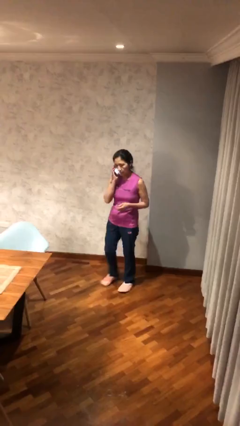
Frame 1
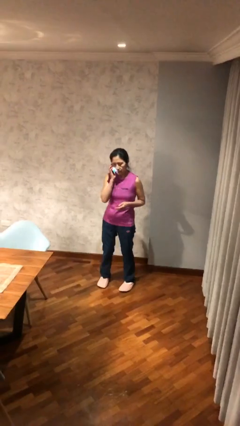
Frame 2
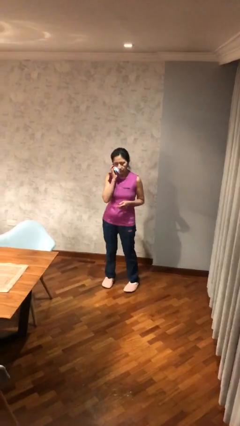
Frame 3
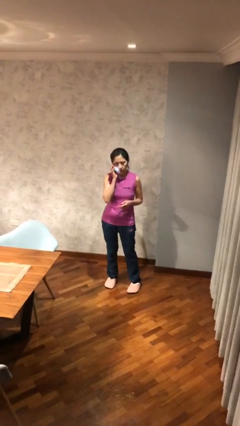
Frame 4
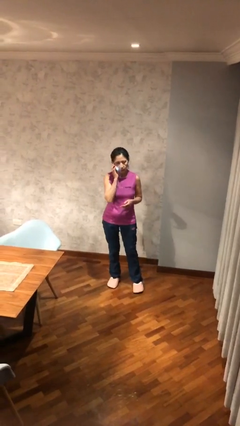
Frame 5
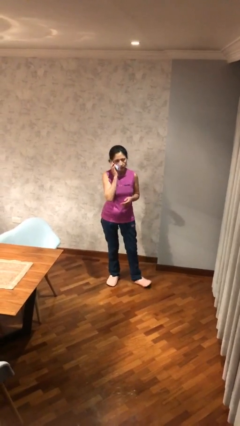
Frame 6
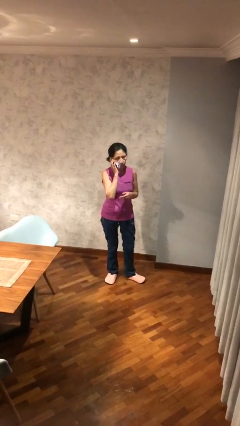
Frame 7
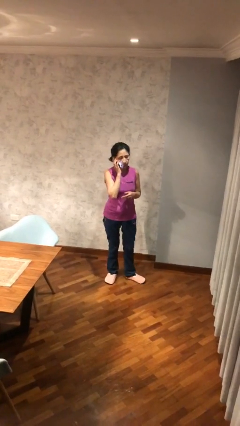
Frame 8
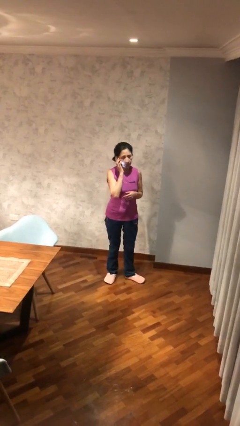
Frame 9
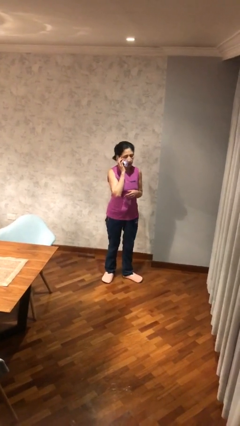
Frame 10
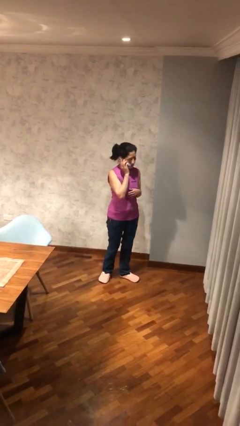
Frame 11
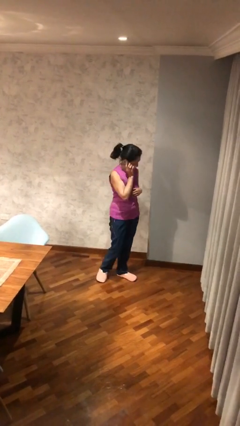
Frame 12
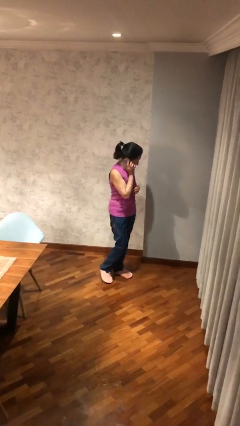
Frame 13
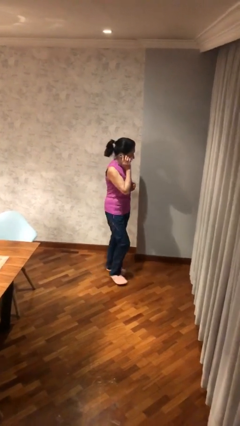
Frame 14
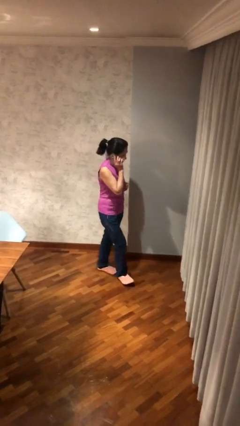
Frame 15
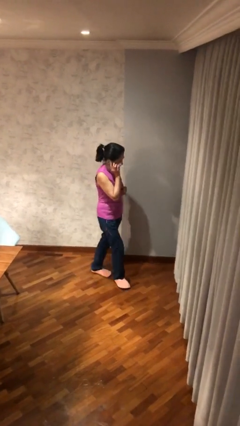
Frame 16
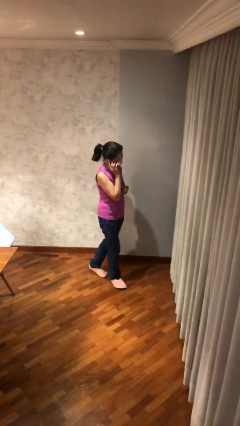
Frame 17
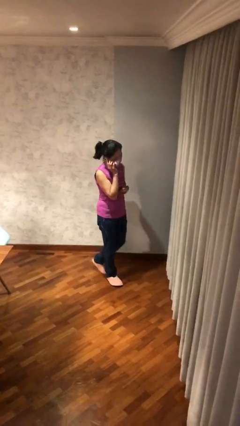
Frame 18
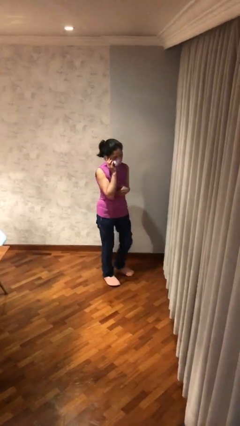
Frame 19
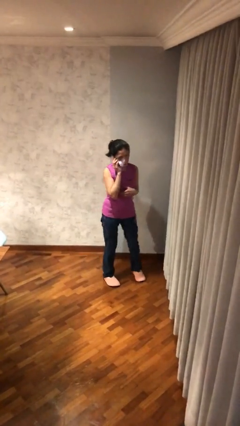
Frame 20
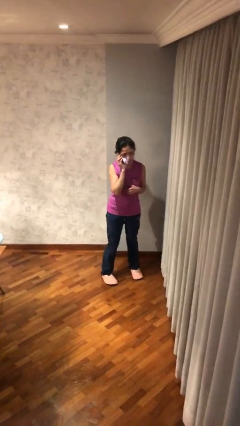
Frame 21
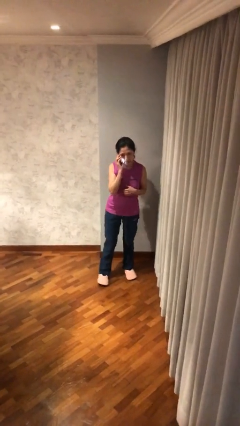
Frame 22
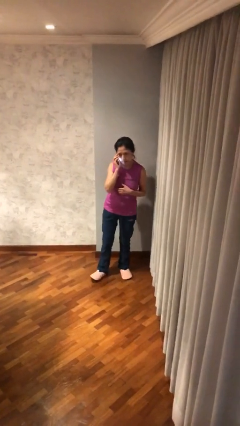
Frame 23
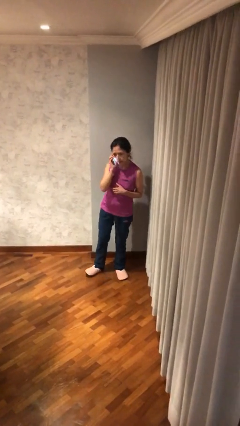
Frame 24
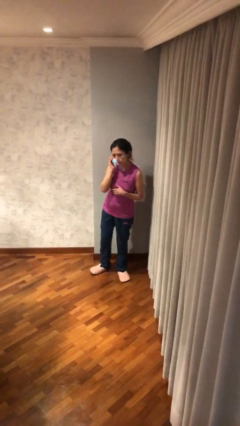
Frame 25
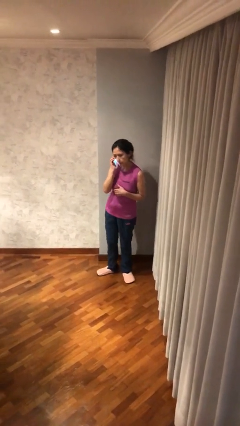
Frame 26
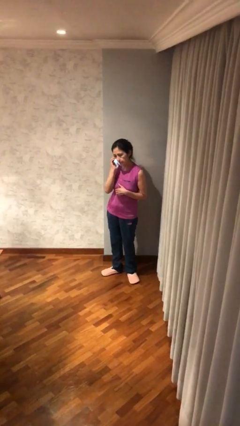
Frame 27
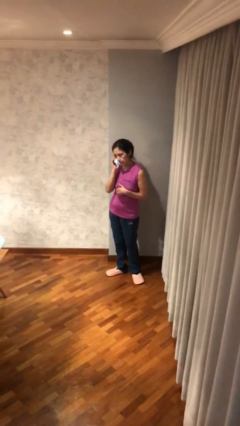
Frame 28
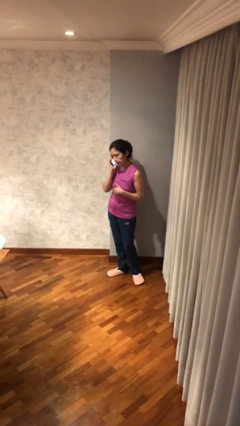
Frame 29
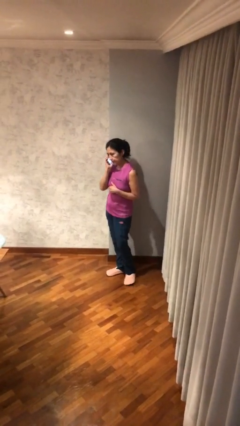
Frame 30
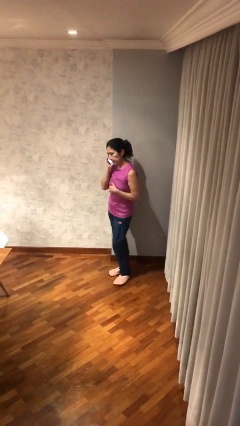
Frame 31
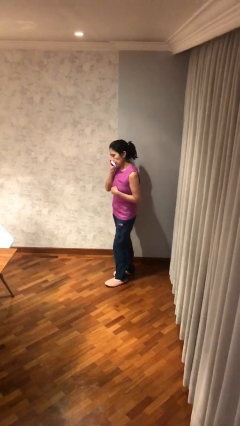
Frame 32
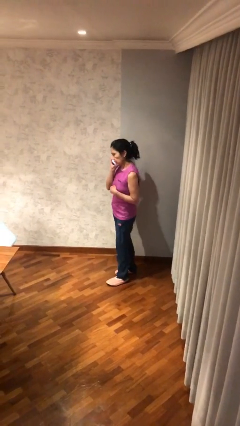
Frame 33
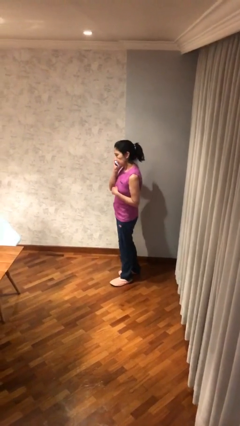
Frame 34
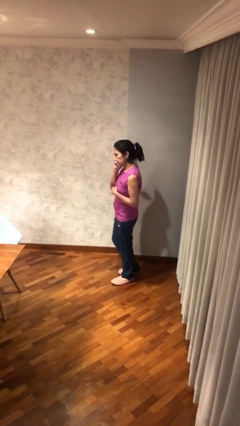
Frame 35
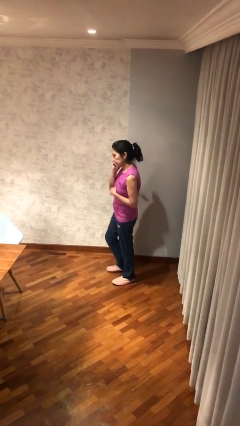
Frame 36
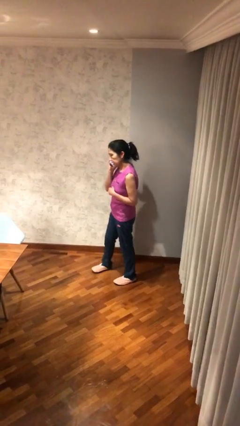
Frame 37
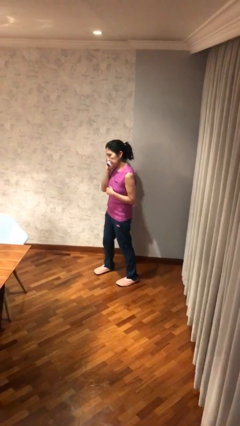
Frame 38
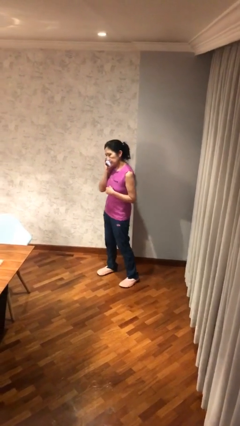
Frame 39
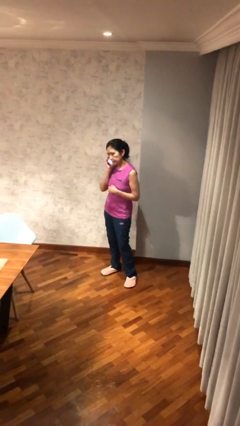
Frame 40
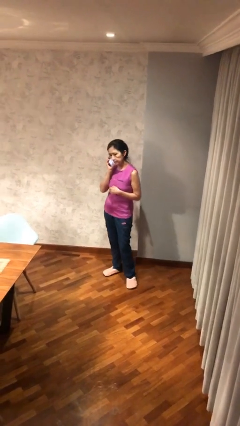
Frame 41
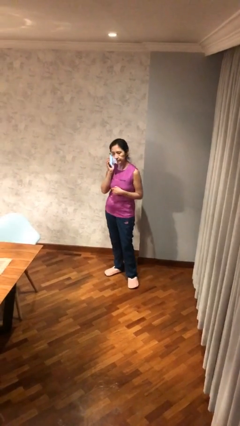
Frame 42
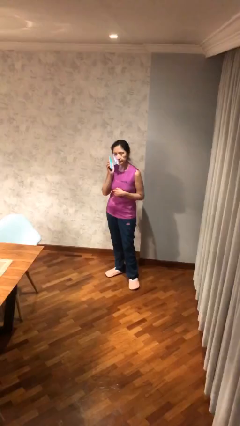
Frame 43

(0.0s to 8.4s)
person talks on phone

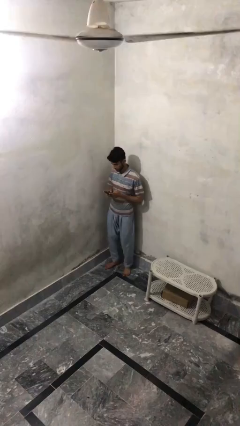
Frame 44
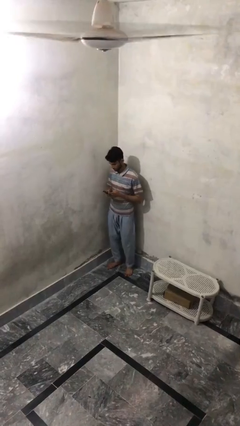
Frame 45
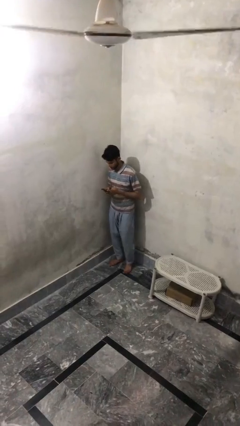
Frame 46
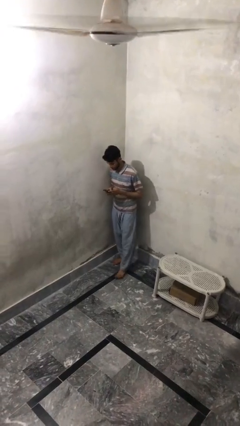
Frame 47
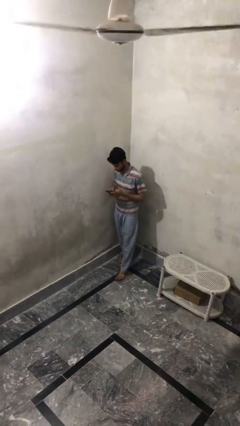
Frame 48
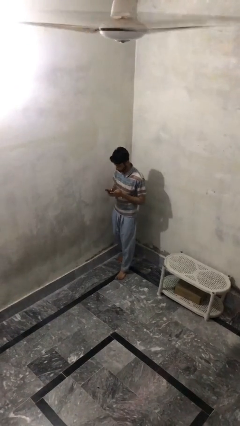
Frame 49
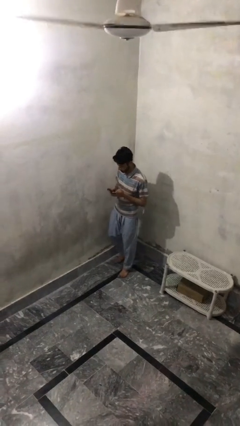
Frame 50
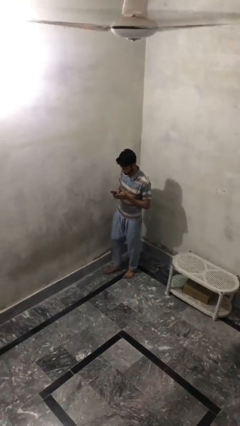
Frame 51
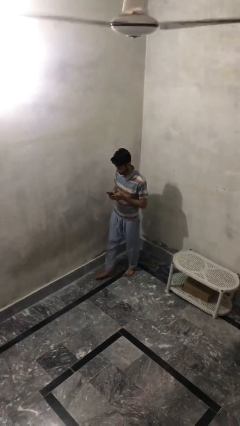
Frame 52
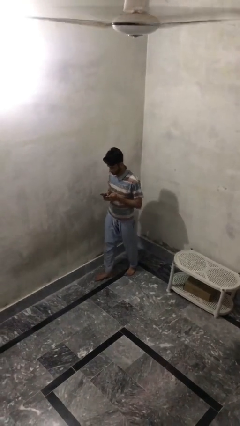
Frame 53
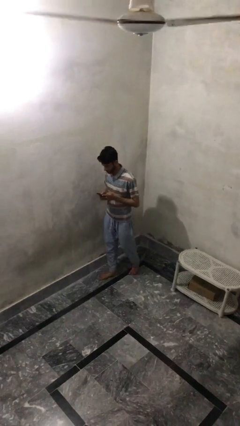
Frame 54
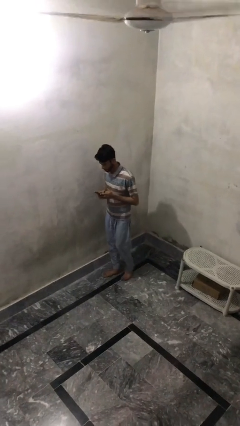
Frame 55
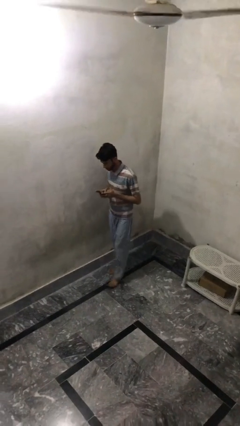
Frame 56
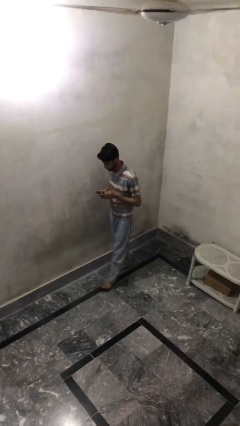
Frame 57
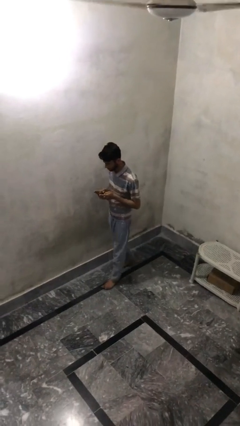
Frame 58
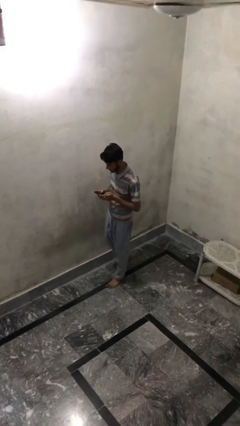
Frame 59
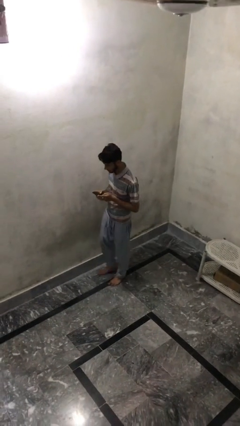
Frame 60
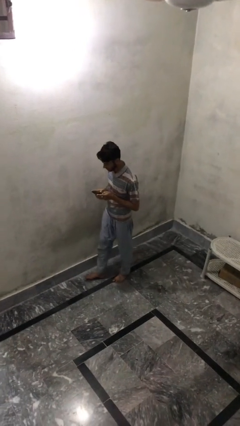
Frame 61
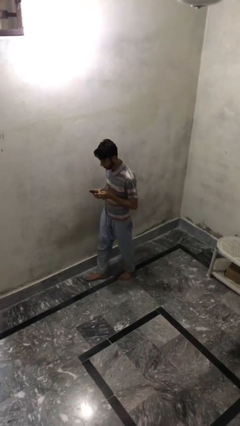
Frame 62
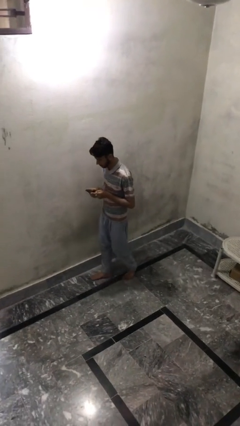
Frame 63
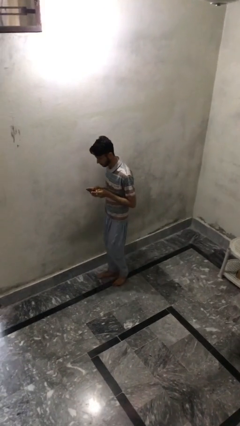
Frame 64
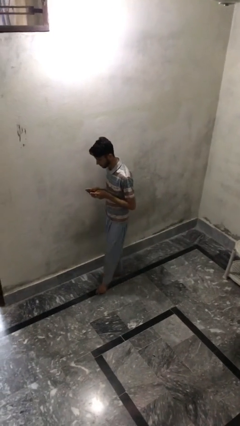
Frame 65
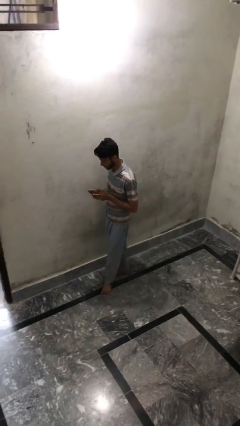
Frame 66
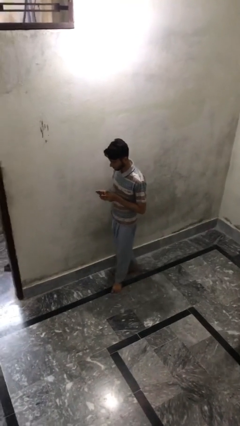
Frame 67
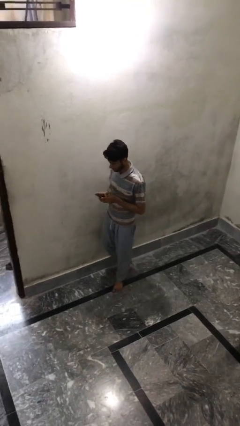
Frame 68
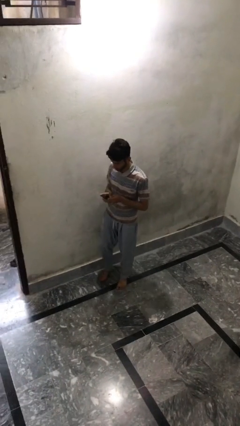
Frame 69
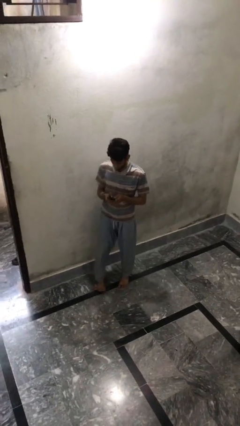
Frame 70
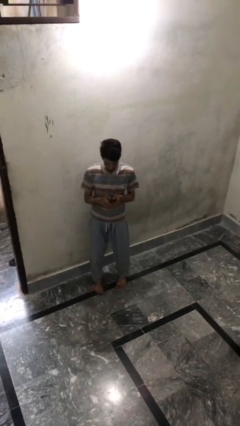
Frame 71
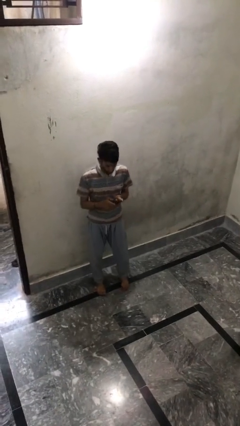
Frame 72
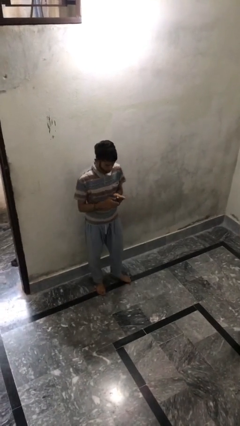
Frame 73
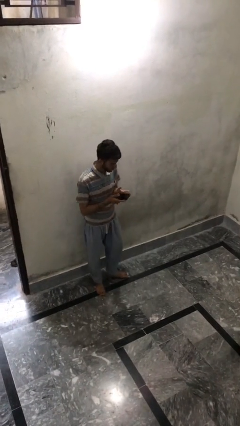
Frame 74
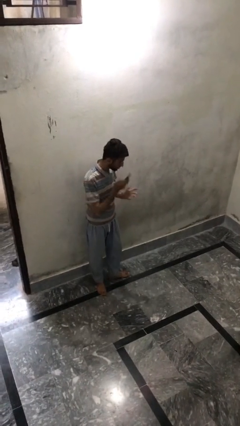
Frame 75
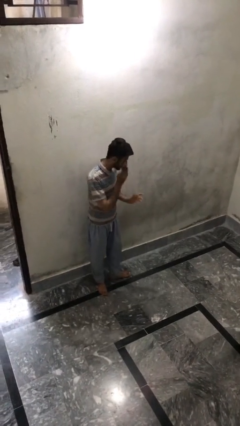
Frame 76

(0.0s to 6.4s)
person texts on phone

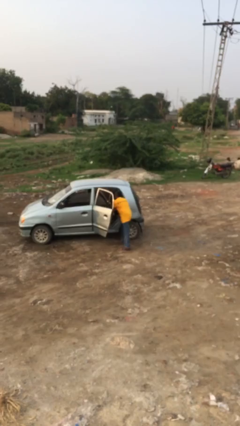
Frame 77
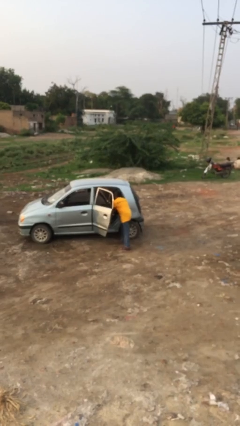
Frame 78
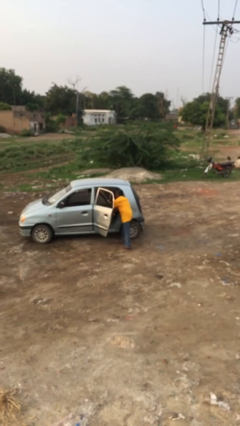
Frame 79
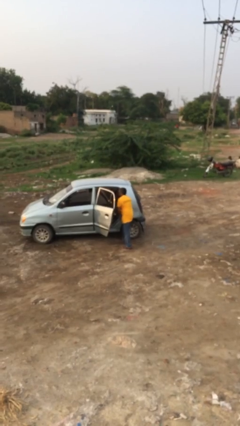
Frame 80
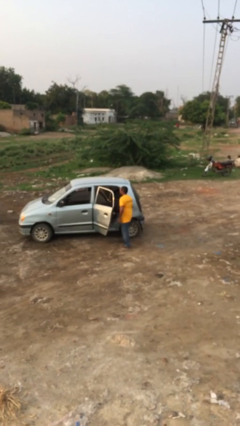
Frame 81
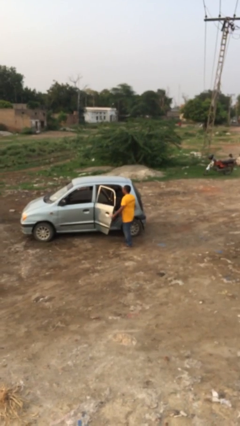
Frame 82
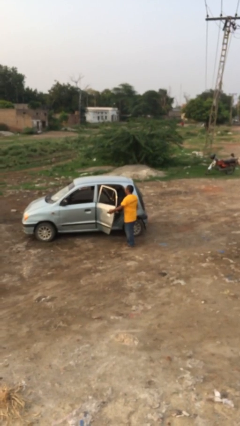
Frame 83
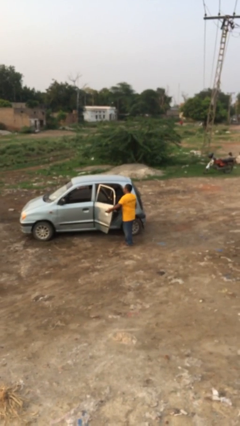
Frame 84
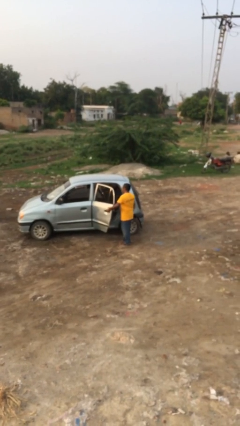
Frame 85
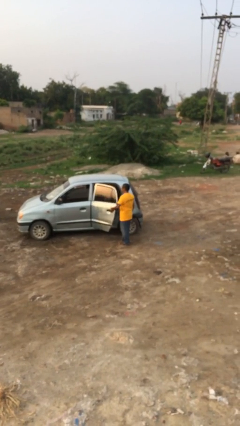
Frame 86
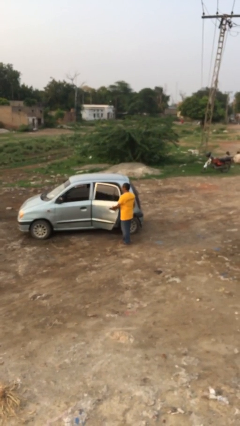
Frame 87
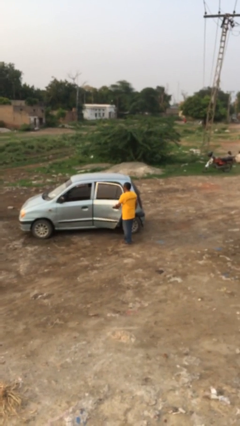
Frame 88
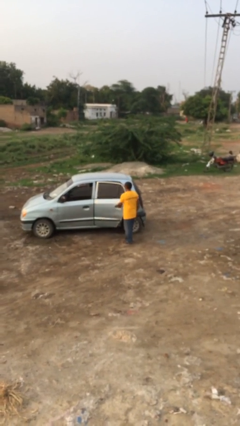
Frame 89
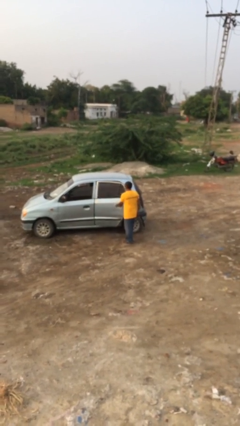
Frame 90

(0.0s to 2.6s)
person closes car door
